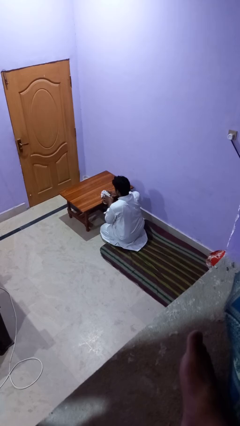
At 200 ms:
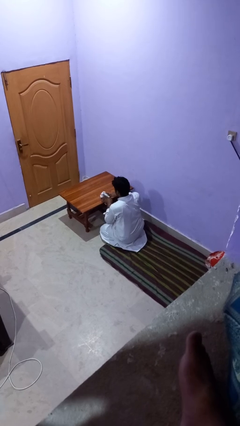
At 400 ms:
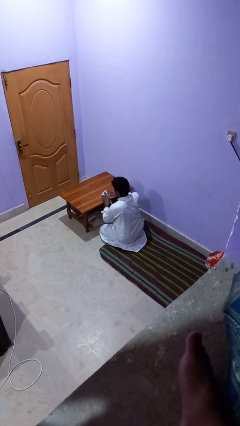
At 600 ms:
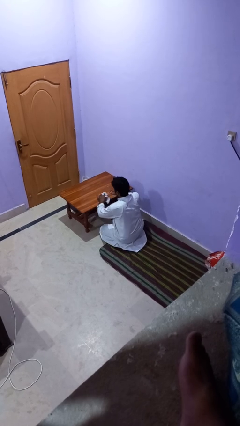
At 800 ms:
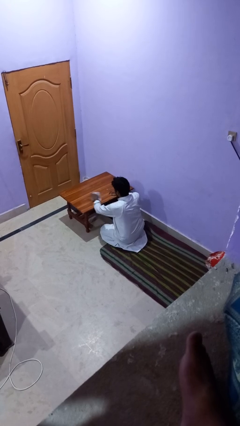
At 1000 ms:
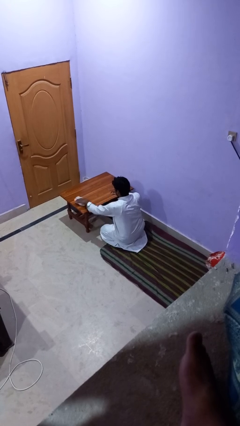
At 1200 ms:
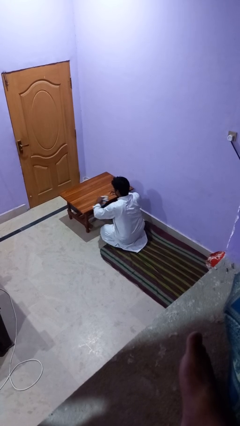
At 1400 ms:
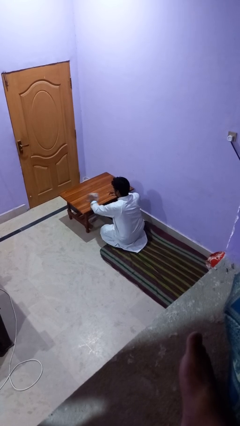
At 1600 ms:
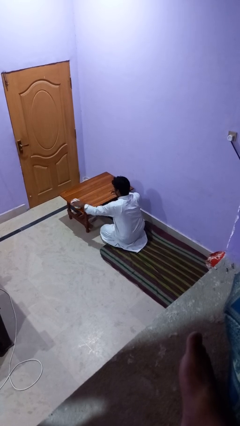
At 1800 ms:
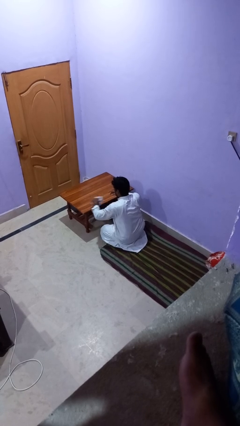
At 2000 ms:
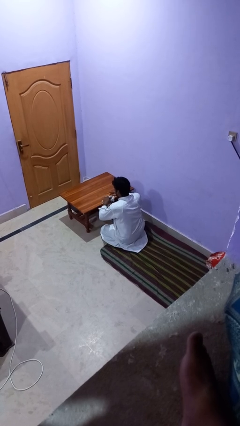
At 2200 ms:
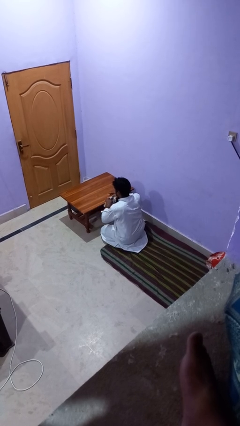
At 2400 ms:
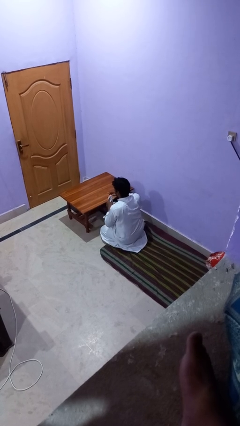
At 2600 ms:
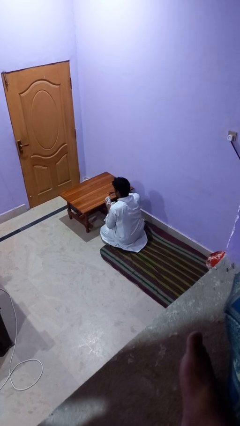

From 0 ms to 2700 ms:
person cleans table with rag

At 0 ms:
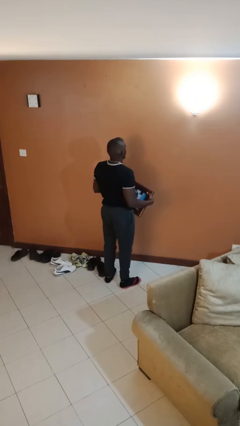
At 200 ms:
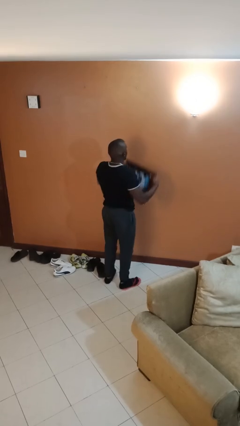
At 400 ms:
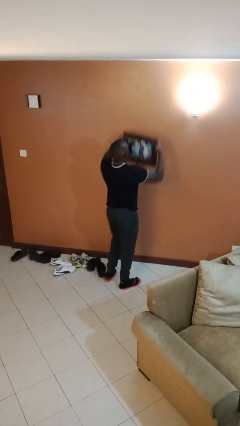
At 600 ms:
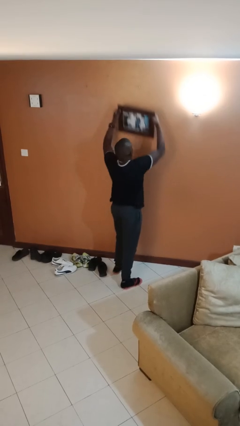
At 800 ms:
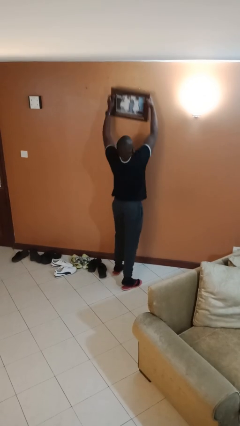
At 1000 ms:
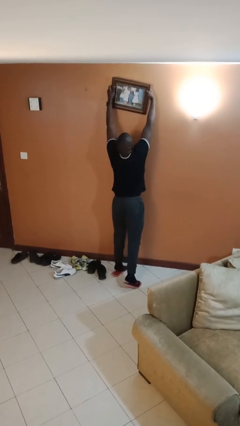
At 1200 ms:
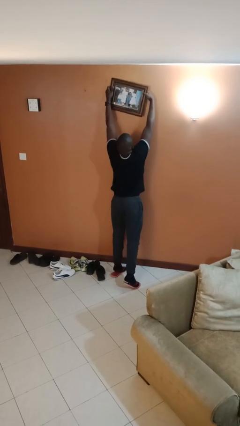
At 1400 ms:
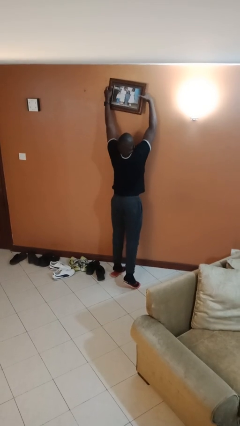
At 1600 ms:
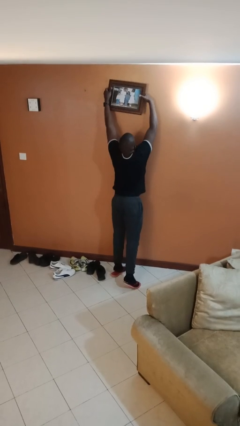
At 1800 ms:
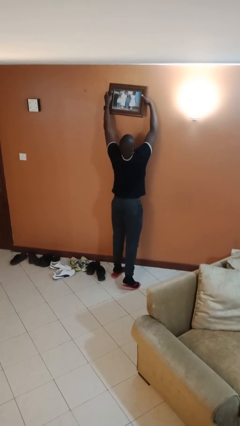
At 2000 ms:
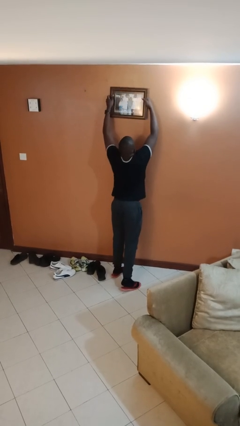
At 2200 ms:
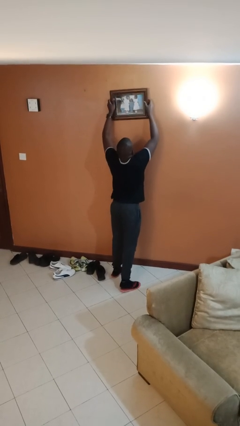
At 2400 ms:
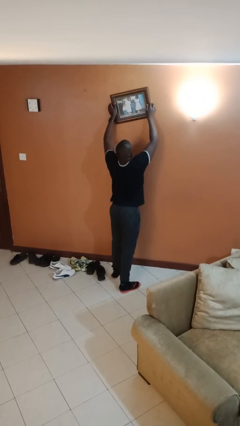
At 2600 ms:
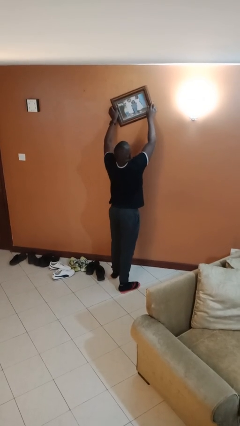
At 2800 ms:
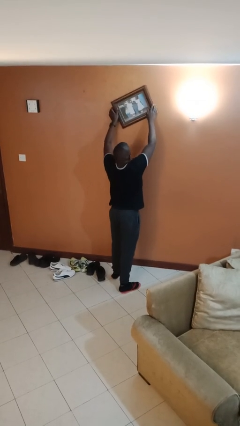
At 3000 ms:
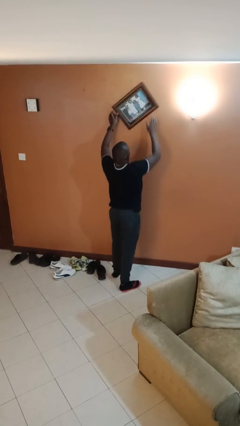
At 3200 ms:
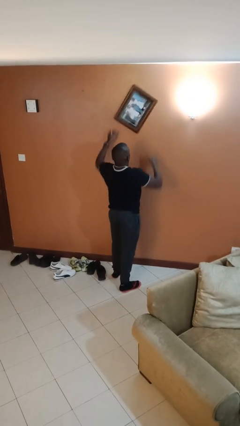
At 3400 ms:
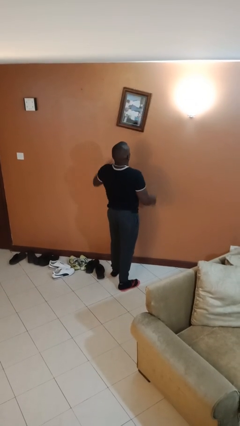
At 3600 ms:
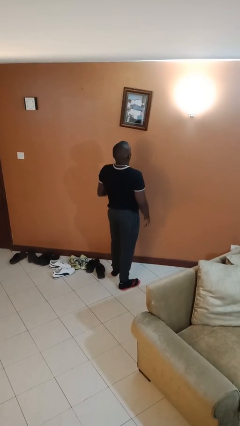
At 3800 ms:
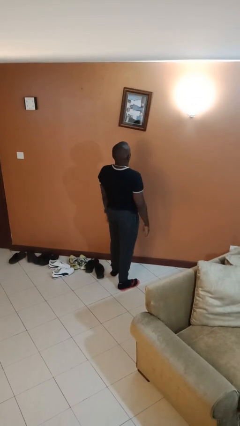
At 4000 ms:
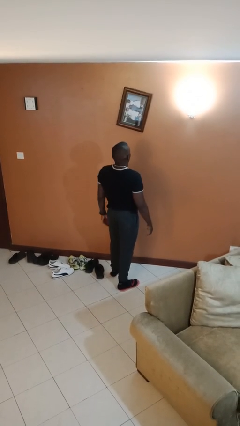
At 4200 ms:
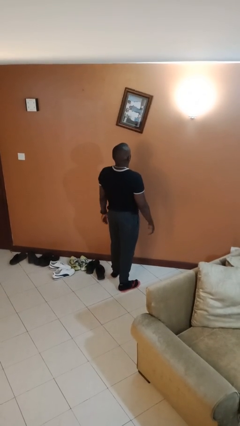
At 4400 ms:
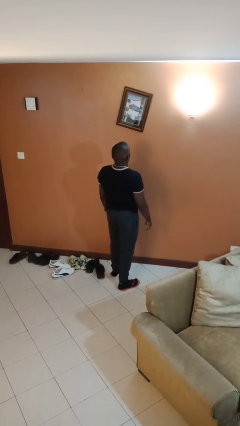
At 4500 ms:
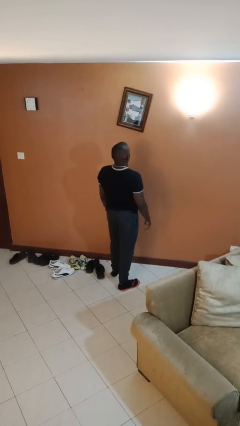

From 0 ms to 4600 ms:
person puts up picture frame

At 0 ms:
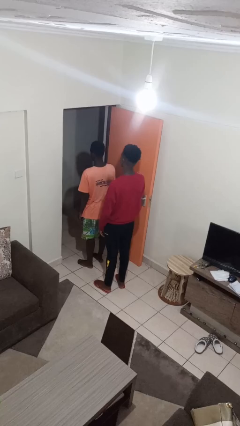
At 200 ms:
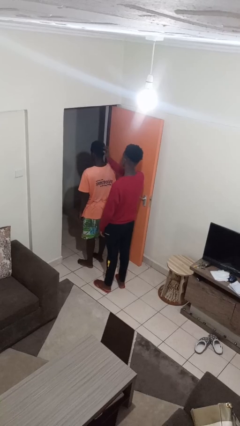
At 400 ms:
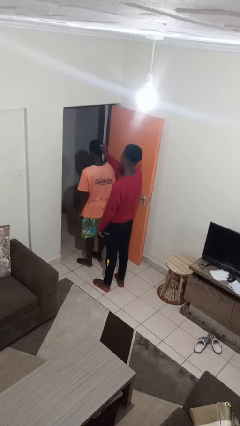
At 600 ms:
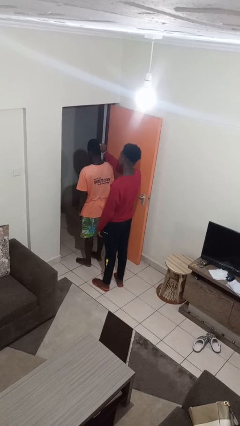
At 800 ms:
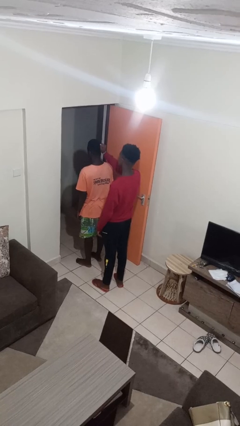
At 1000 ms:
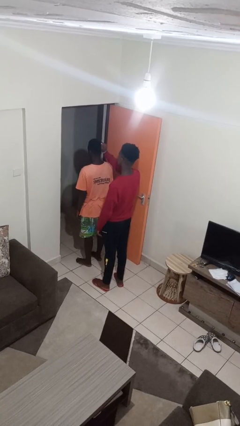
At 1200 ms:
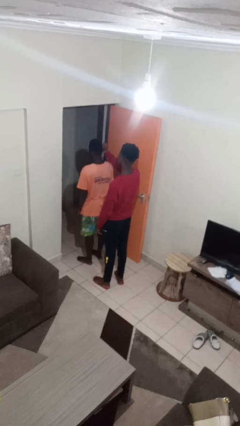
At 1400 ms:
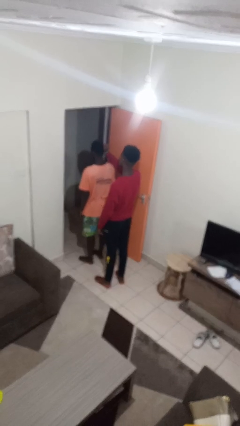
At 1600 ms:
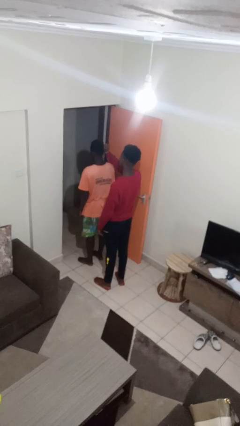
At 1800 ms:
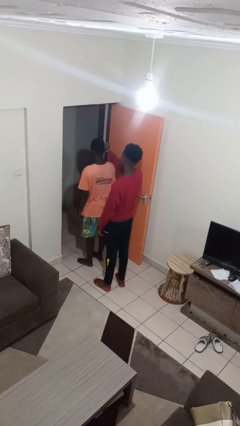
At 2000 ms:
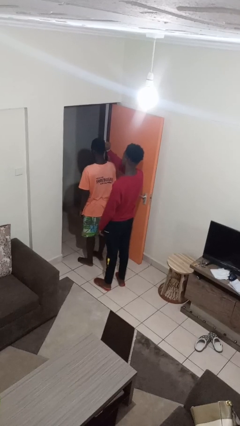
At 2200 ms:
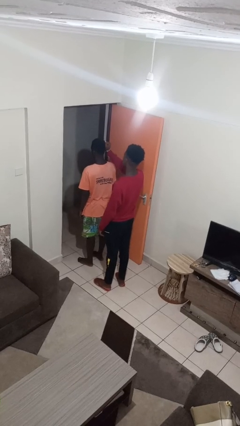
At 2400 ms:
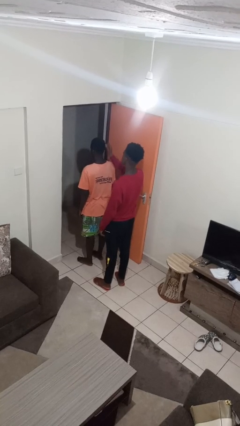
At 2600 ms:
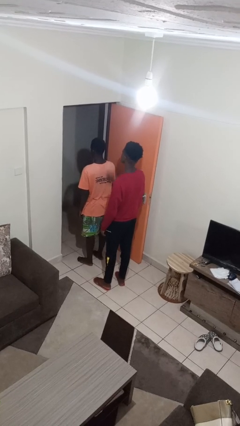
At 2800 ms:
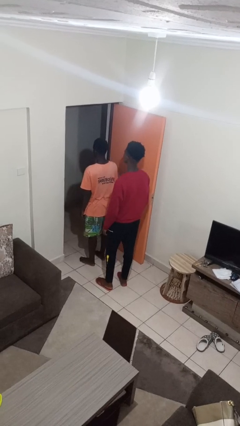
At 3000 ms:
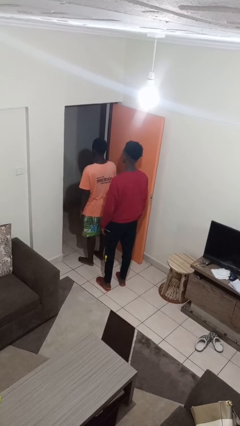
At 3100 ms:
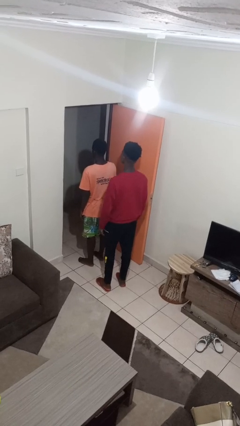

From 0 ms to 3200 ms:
person grabs person by hair

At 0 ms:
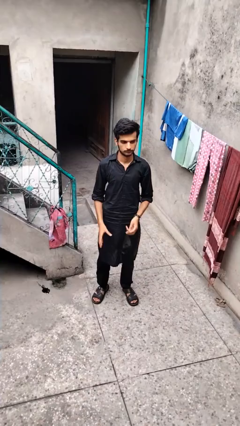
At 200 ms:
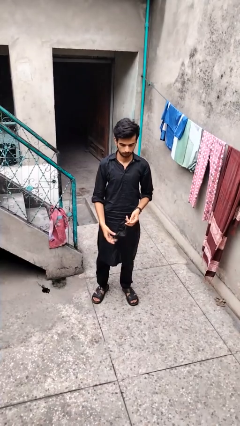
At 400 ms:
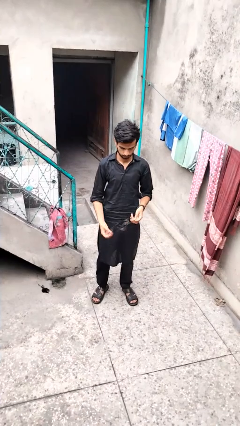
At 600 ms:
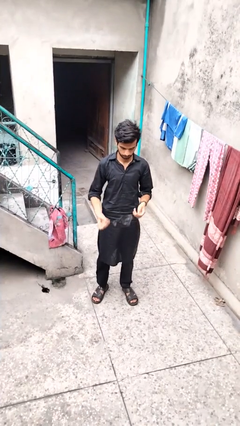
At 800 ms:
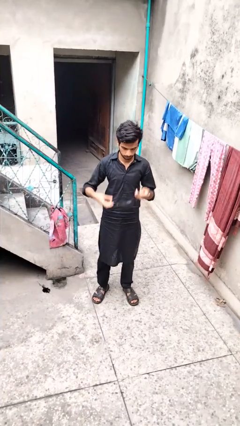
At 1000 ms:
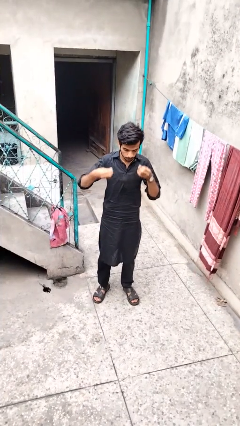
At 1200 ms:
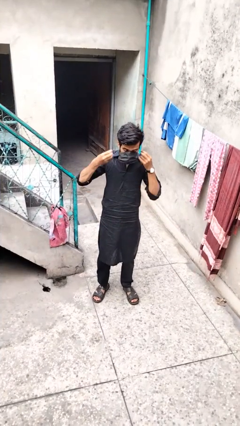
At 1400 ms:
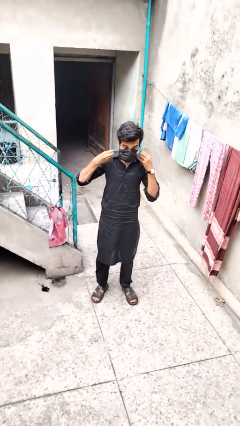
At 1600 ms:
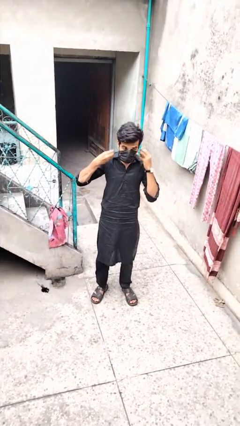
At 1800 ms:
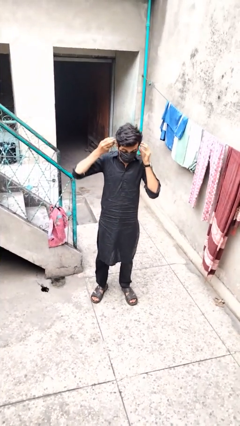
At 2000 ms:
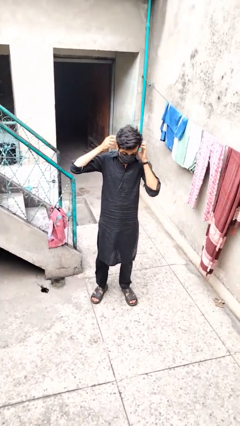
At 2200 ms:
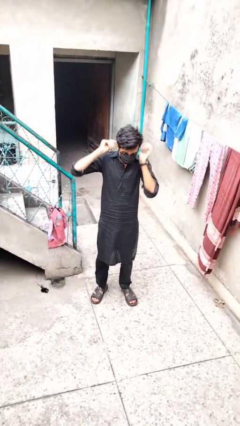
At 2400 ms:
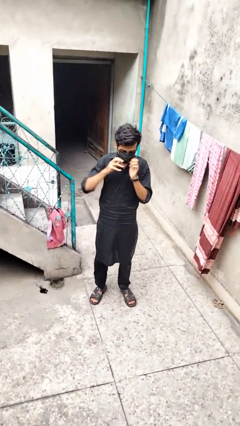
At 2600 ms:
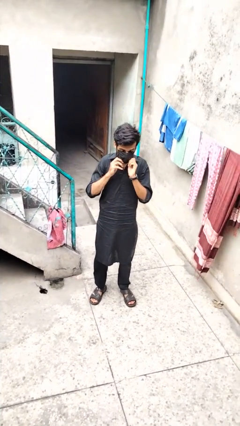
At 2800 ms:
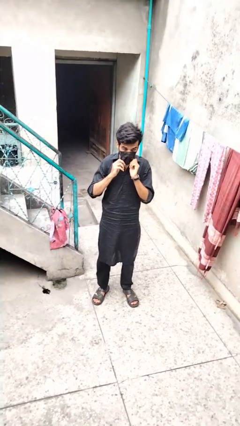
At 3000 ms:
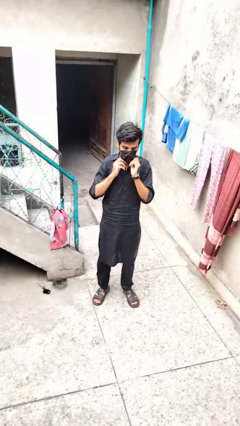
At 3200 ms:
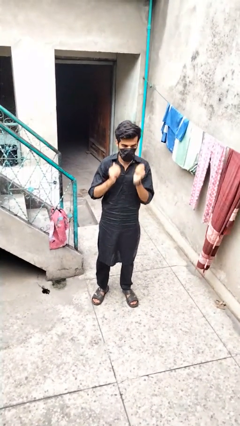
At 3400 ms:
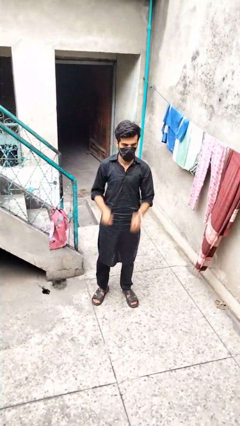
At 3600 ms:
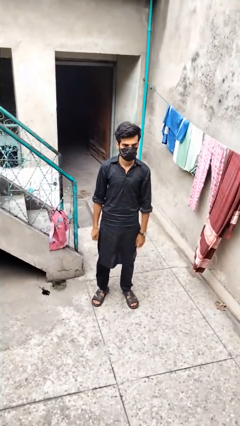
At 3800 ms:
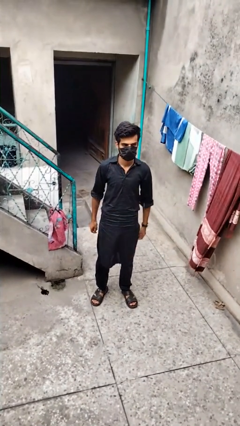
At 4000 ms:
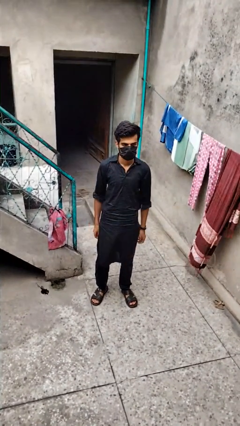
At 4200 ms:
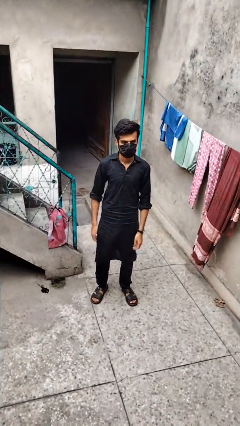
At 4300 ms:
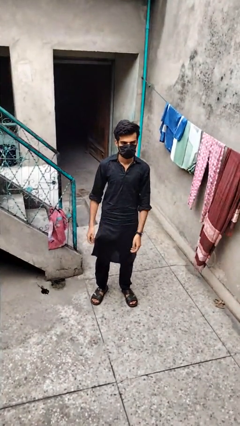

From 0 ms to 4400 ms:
person puts on facemask

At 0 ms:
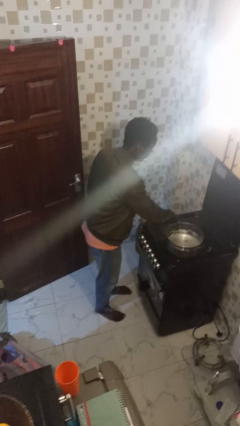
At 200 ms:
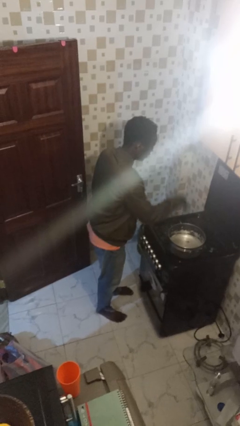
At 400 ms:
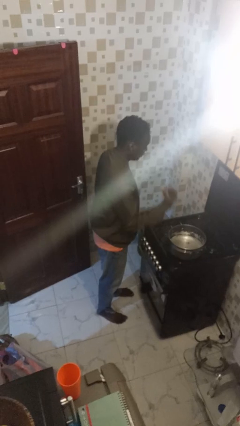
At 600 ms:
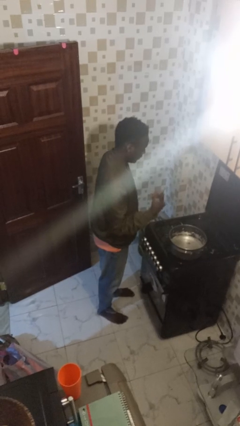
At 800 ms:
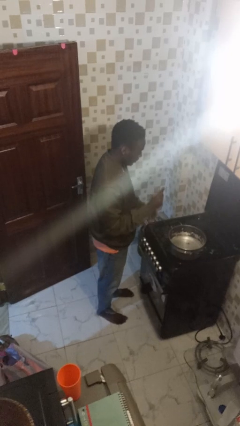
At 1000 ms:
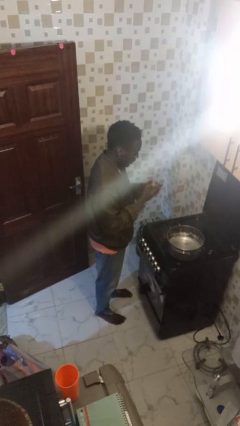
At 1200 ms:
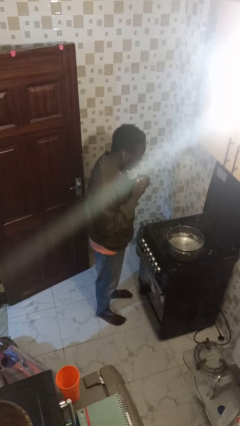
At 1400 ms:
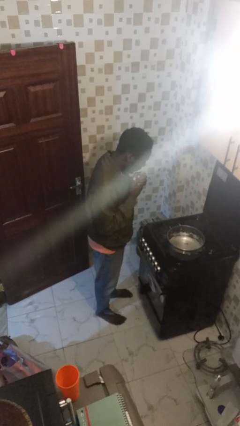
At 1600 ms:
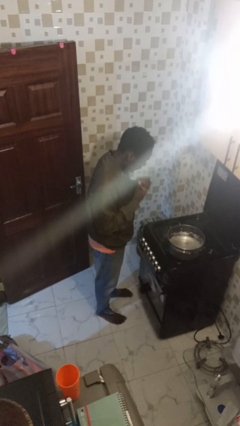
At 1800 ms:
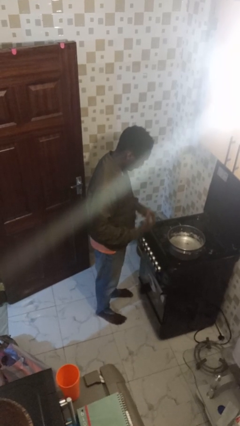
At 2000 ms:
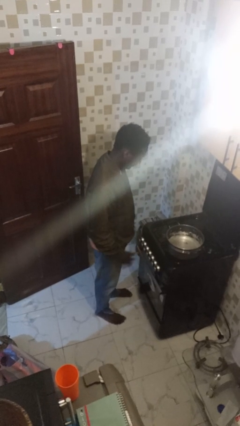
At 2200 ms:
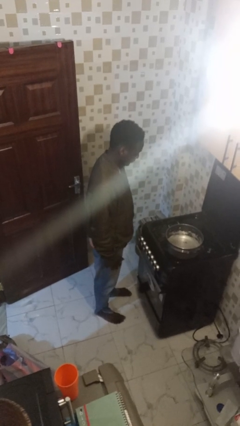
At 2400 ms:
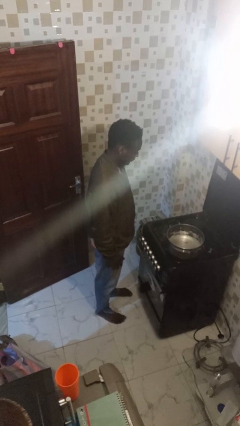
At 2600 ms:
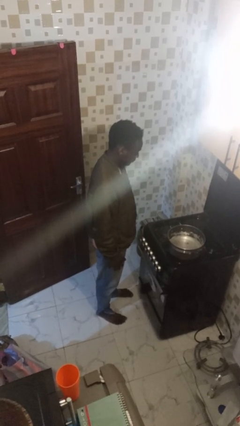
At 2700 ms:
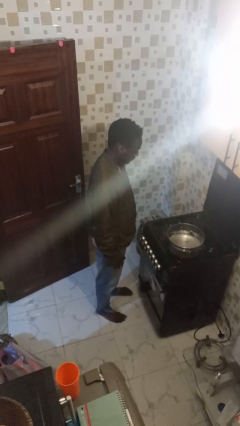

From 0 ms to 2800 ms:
person burns hand
